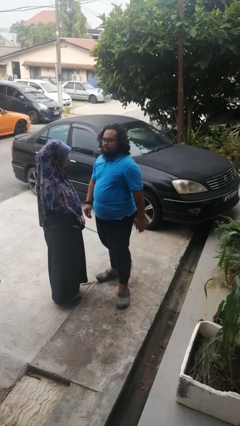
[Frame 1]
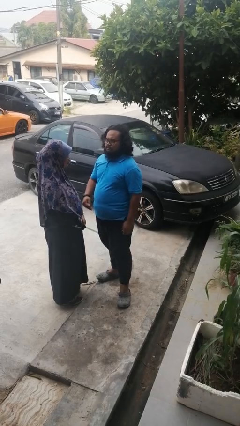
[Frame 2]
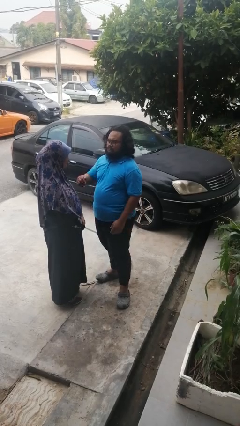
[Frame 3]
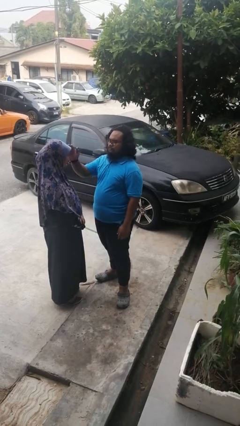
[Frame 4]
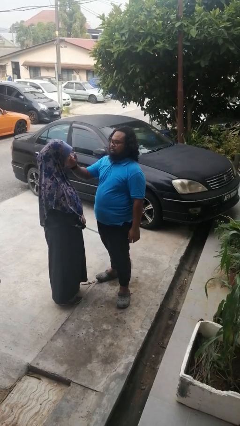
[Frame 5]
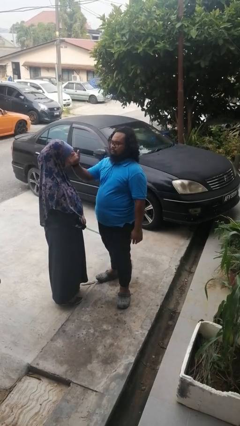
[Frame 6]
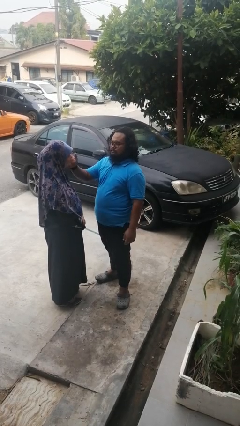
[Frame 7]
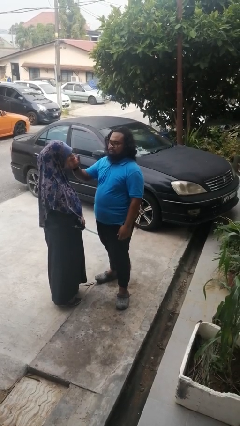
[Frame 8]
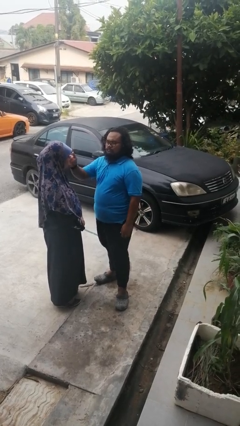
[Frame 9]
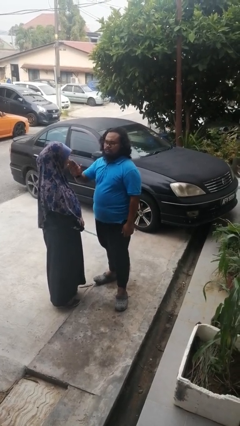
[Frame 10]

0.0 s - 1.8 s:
person touches face of person

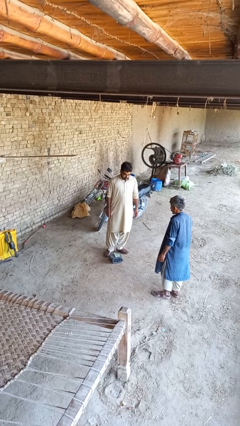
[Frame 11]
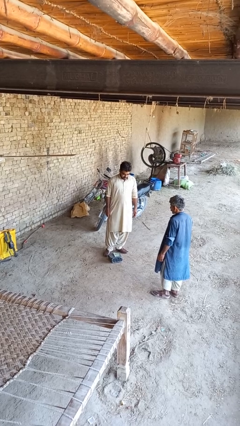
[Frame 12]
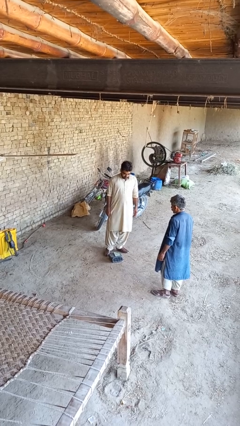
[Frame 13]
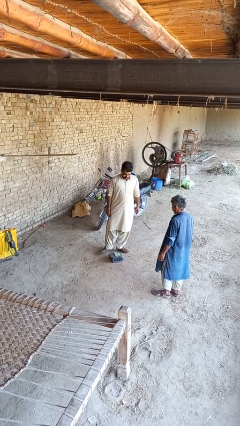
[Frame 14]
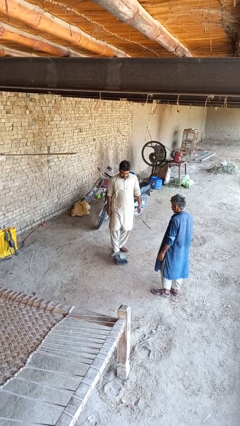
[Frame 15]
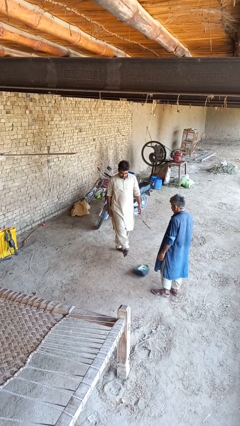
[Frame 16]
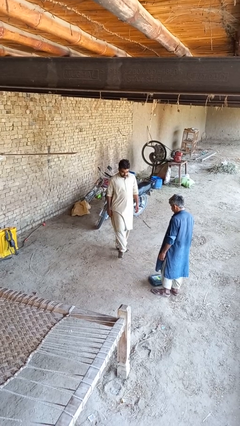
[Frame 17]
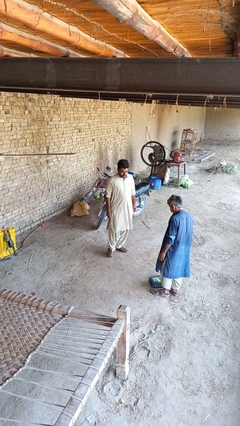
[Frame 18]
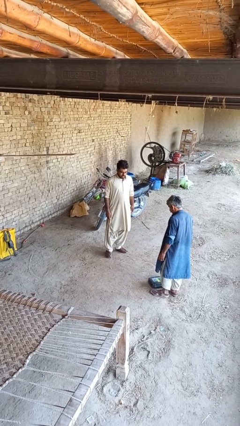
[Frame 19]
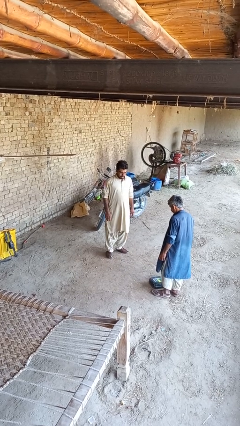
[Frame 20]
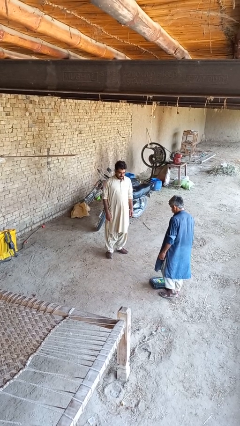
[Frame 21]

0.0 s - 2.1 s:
person kicks object to person

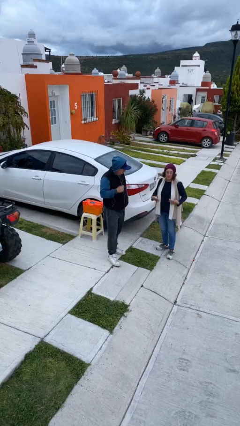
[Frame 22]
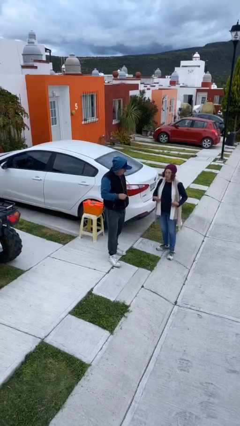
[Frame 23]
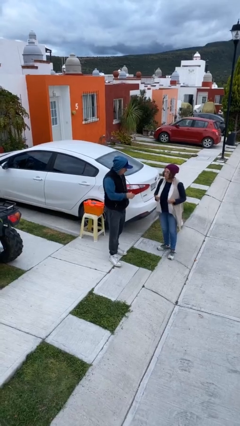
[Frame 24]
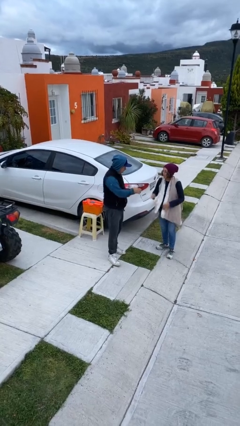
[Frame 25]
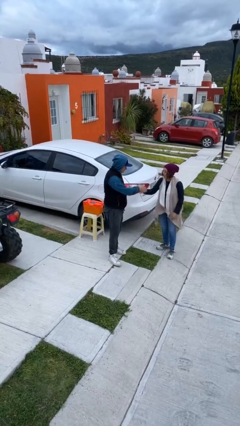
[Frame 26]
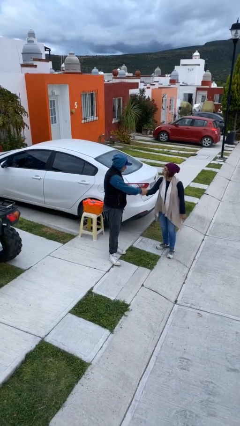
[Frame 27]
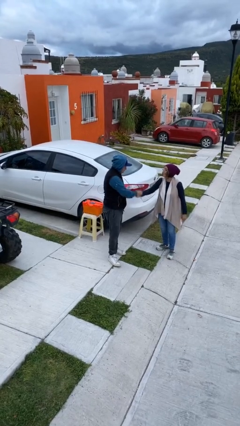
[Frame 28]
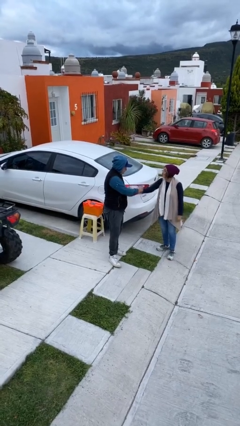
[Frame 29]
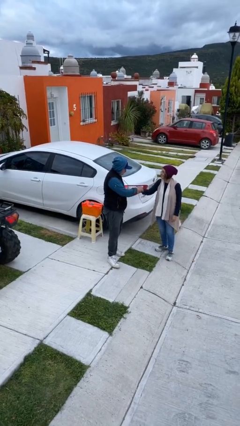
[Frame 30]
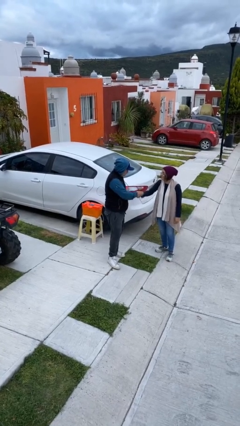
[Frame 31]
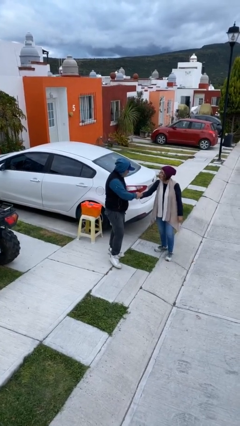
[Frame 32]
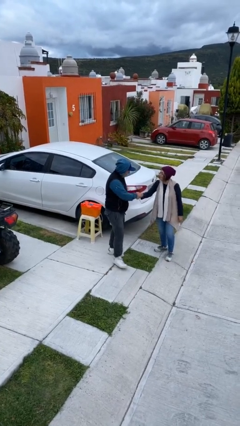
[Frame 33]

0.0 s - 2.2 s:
person shakes hand

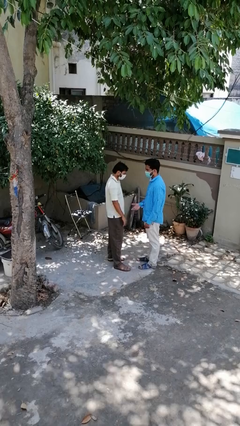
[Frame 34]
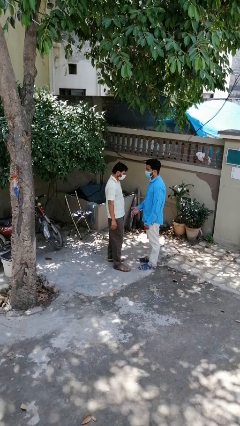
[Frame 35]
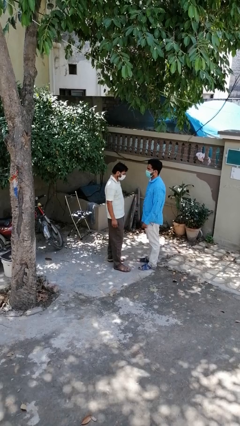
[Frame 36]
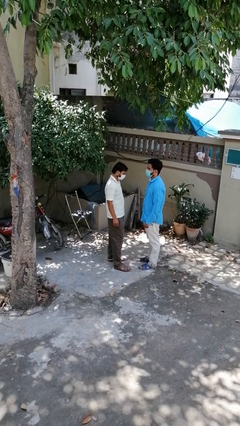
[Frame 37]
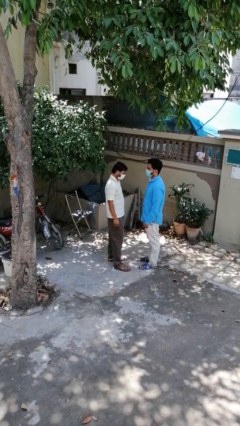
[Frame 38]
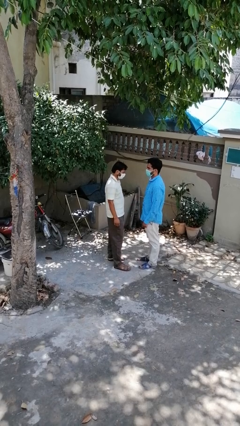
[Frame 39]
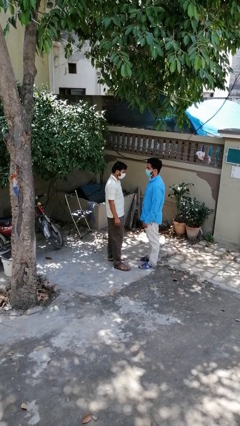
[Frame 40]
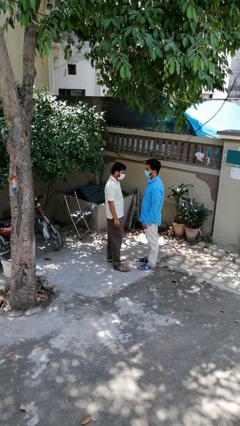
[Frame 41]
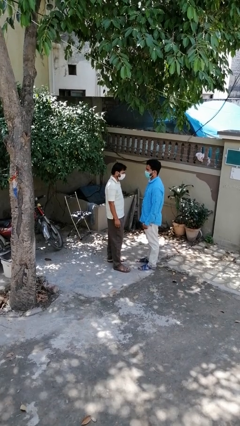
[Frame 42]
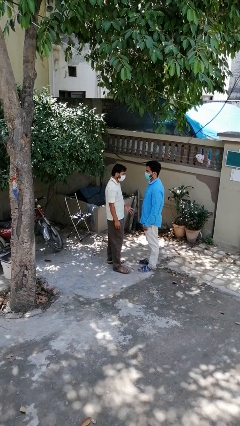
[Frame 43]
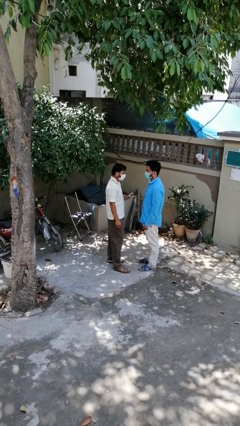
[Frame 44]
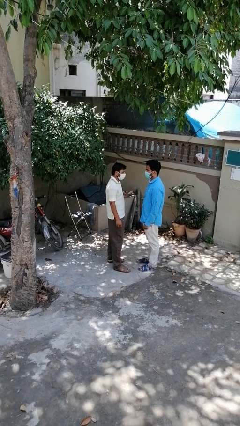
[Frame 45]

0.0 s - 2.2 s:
person highfives hand

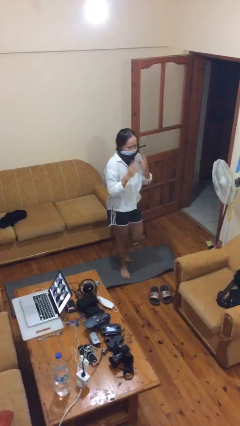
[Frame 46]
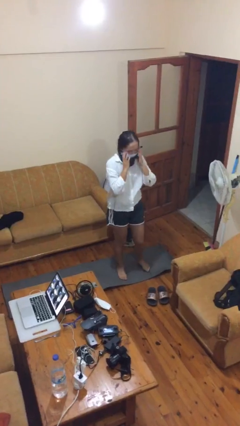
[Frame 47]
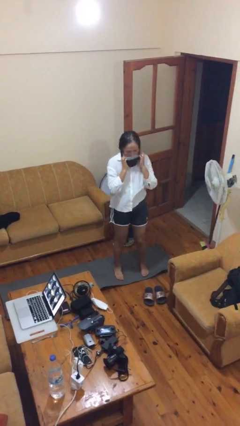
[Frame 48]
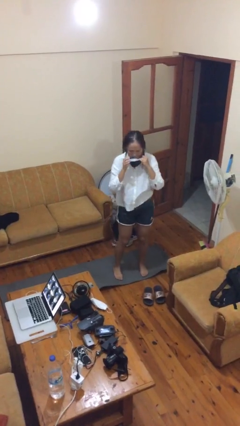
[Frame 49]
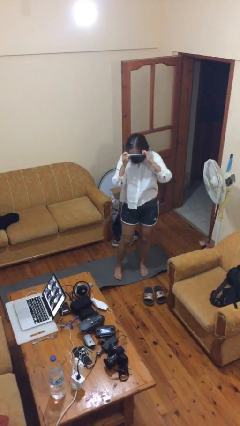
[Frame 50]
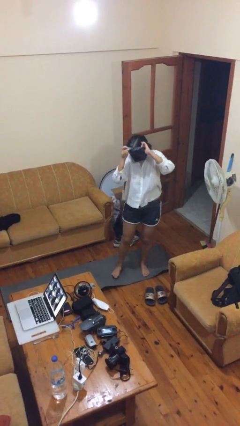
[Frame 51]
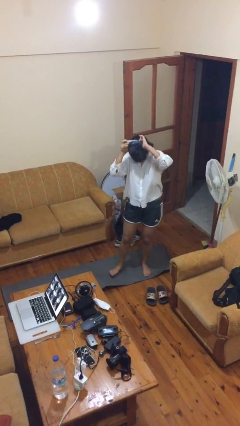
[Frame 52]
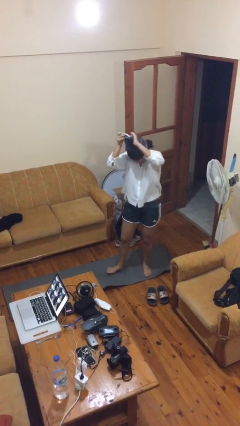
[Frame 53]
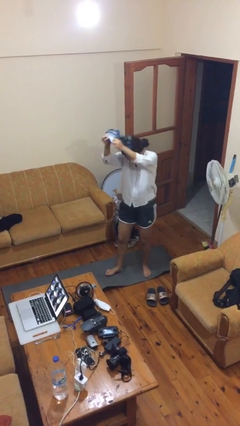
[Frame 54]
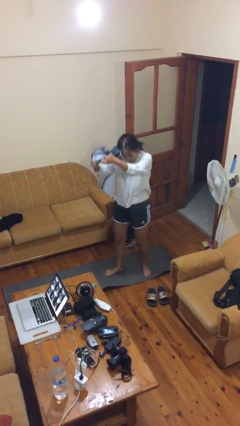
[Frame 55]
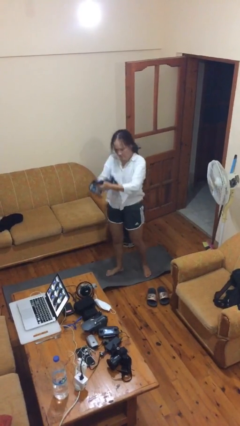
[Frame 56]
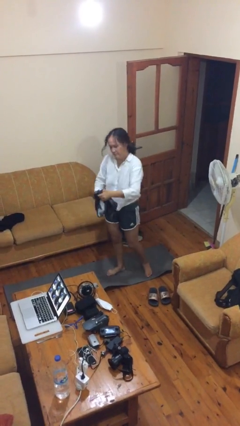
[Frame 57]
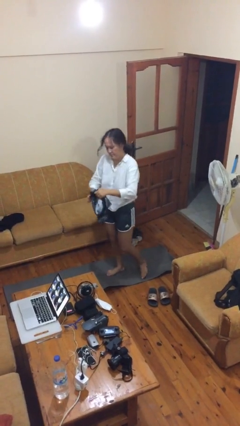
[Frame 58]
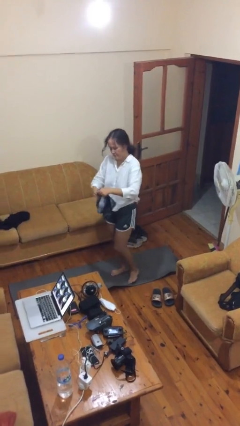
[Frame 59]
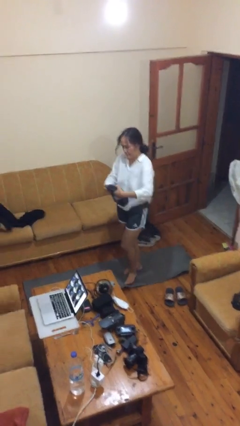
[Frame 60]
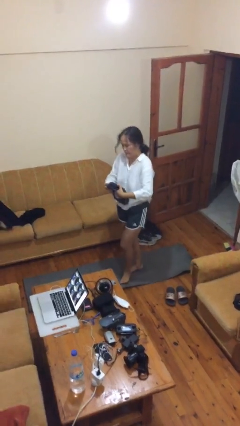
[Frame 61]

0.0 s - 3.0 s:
person takes off scarf

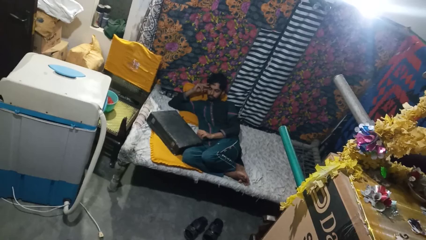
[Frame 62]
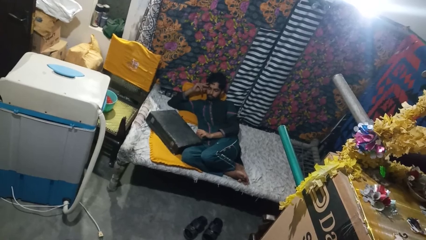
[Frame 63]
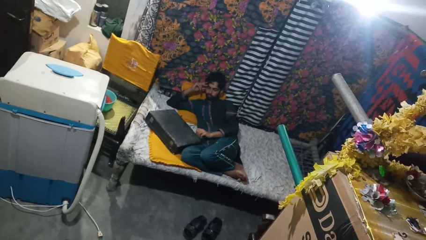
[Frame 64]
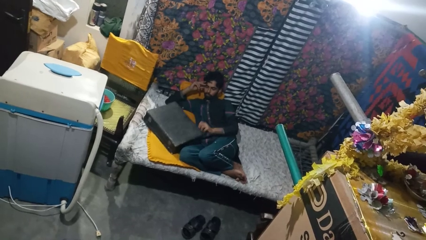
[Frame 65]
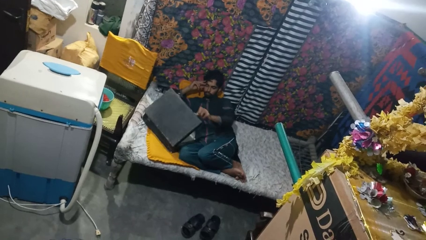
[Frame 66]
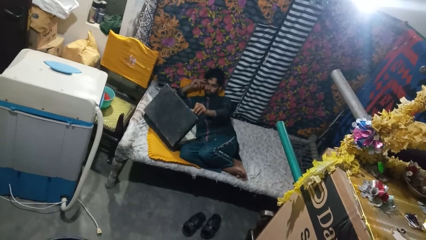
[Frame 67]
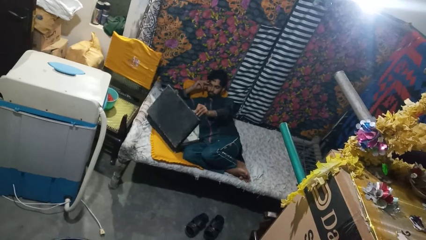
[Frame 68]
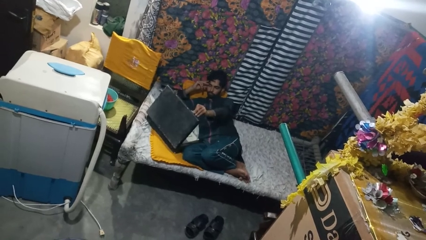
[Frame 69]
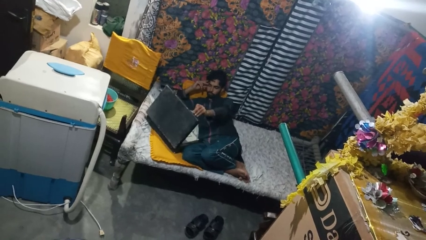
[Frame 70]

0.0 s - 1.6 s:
person opens suitcase

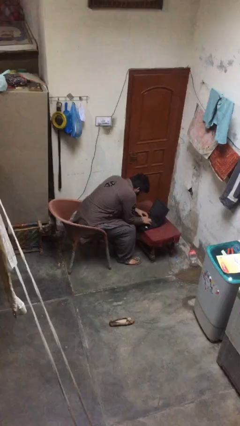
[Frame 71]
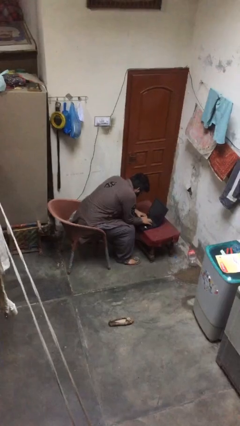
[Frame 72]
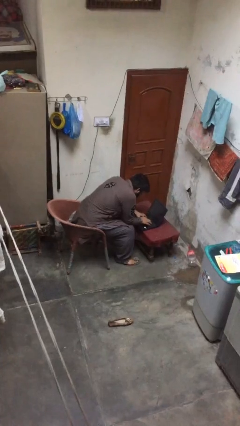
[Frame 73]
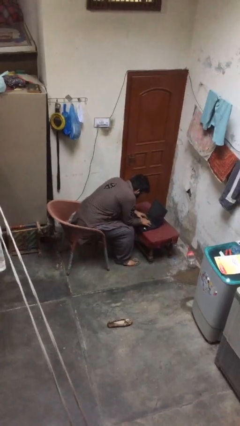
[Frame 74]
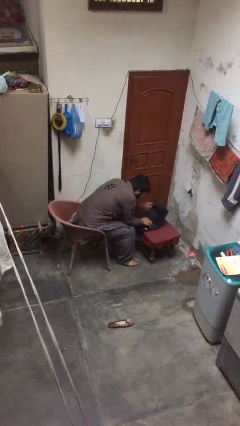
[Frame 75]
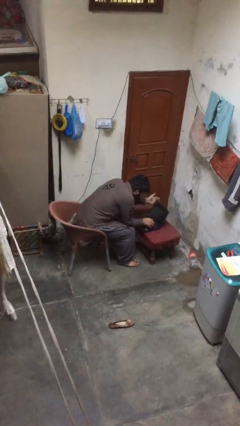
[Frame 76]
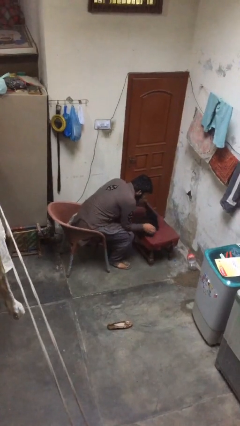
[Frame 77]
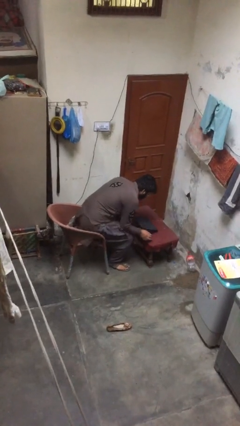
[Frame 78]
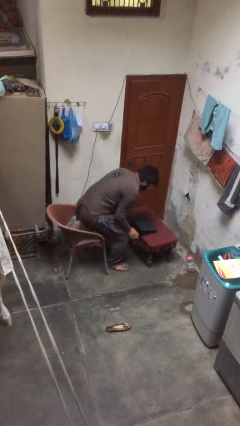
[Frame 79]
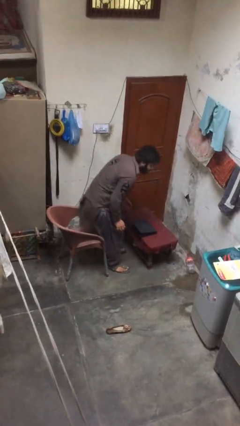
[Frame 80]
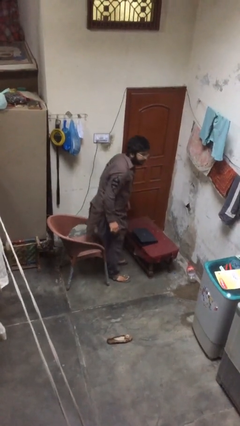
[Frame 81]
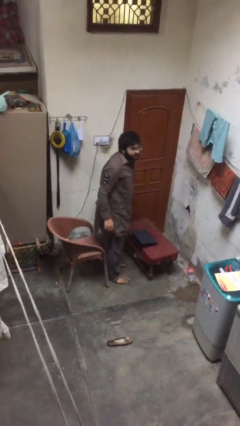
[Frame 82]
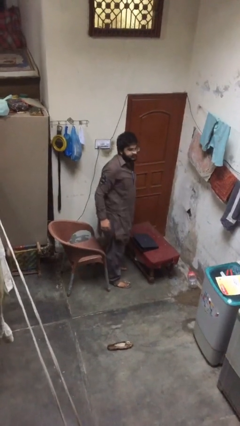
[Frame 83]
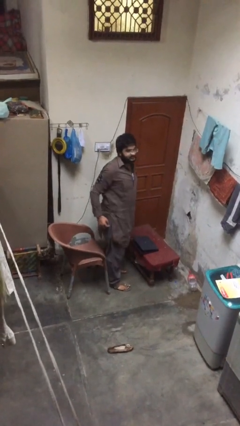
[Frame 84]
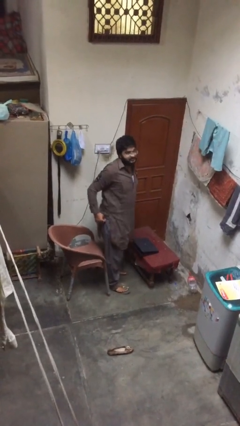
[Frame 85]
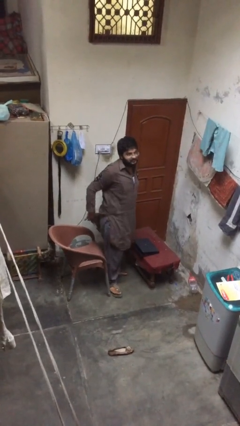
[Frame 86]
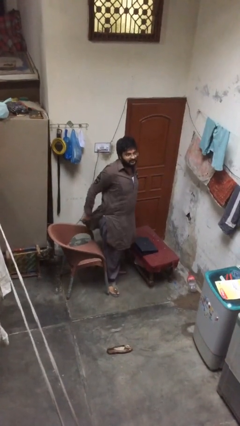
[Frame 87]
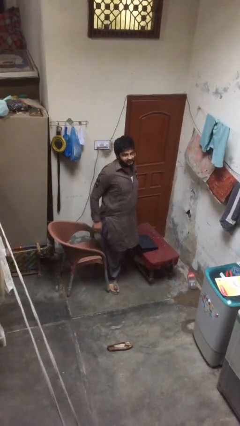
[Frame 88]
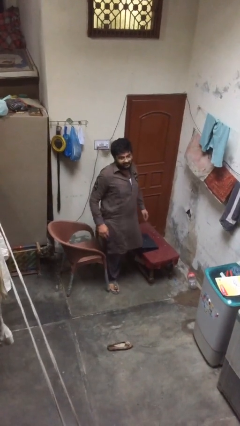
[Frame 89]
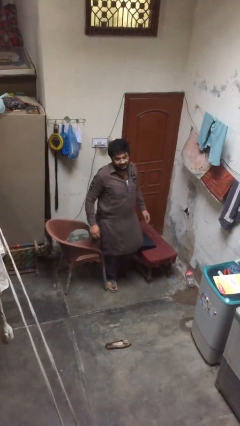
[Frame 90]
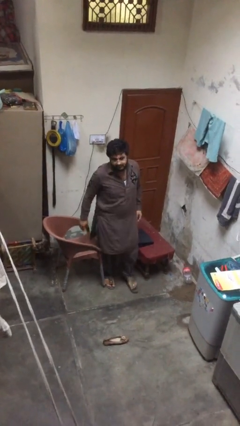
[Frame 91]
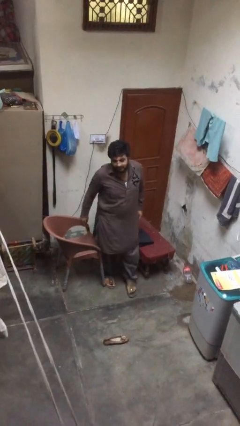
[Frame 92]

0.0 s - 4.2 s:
person stands up

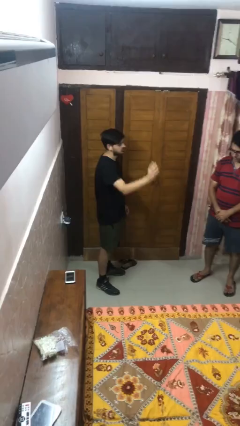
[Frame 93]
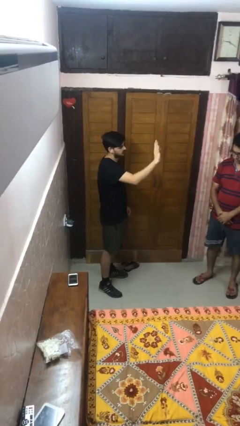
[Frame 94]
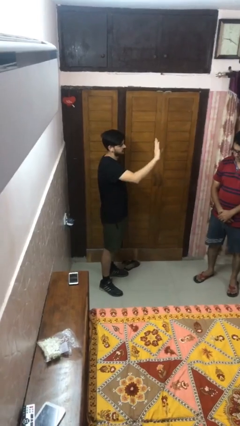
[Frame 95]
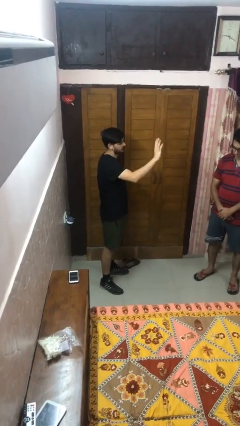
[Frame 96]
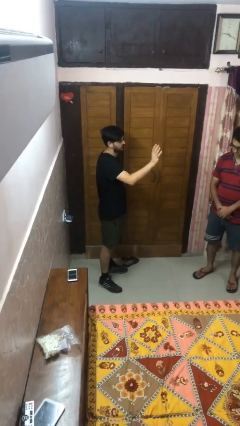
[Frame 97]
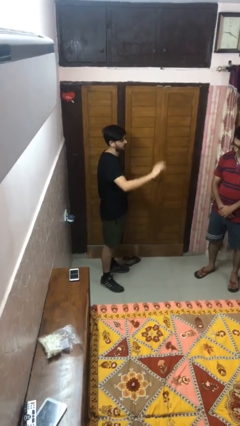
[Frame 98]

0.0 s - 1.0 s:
person waves at person
